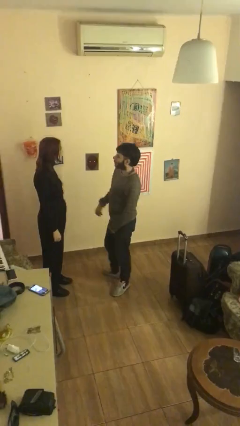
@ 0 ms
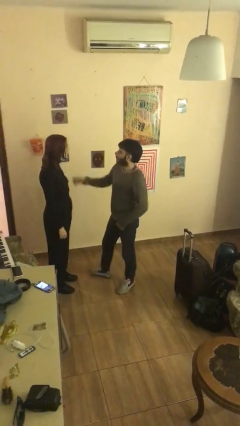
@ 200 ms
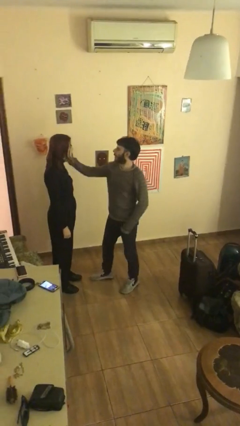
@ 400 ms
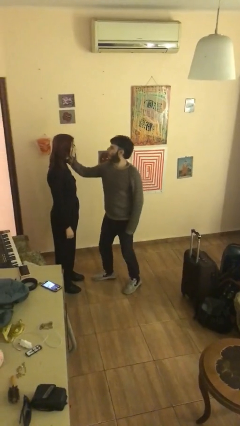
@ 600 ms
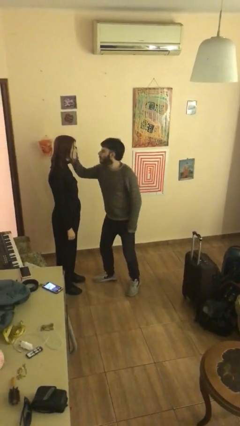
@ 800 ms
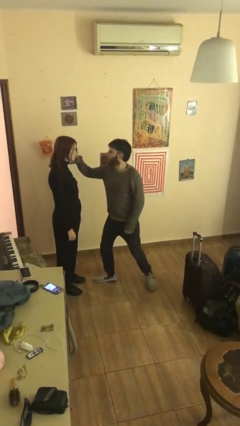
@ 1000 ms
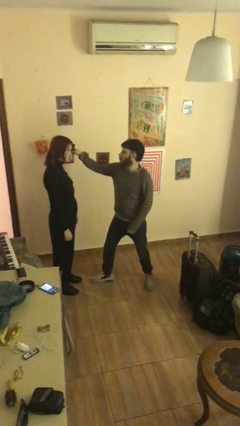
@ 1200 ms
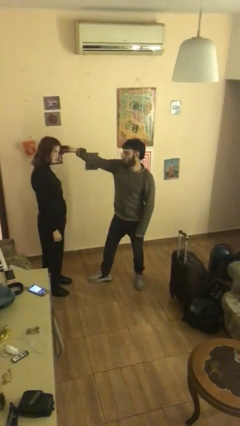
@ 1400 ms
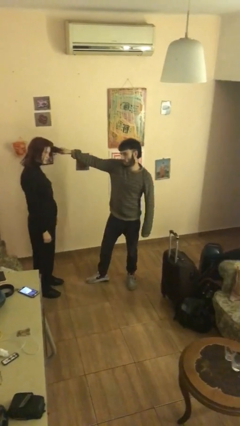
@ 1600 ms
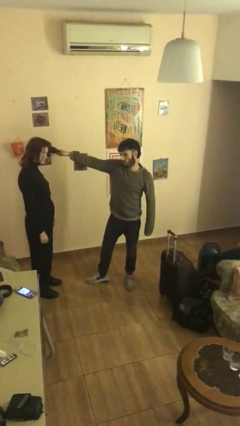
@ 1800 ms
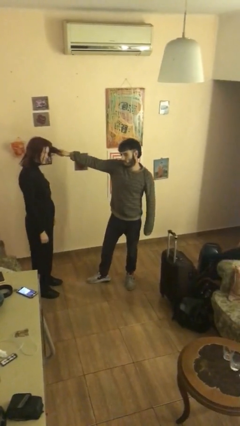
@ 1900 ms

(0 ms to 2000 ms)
person grabs person by hair

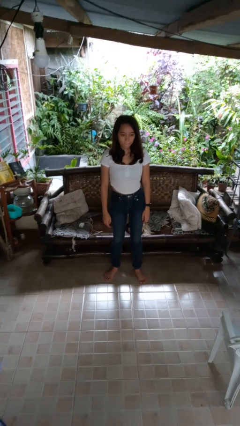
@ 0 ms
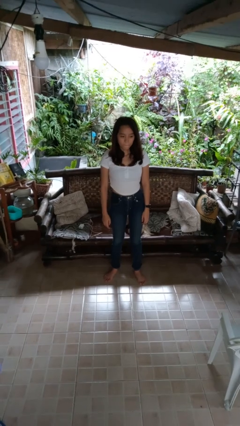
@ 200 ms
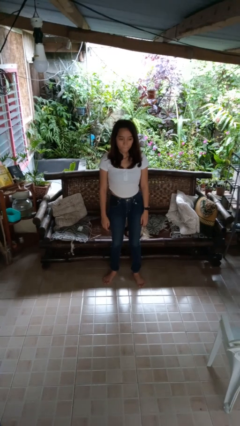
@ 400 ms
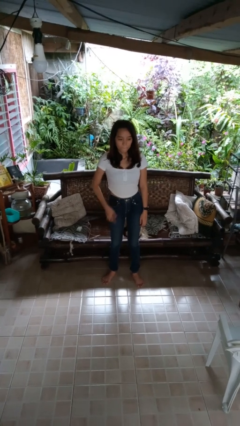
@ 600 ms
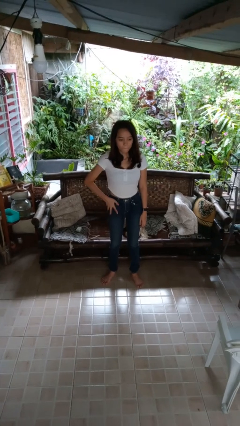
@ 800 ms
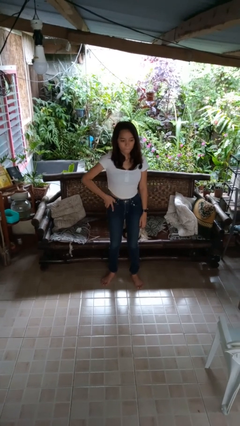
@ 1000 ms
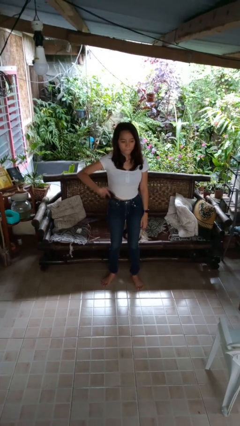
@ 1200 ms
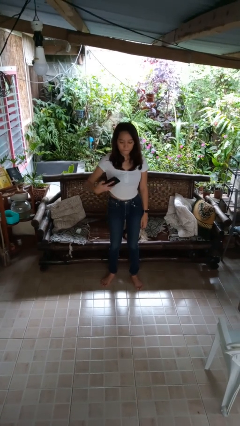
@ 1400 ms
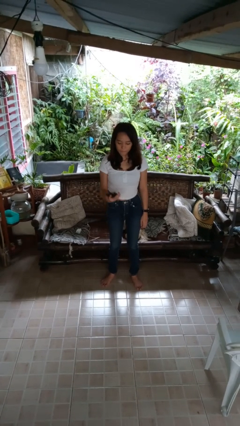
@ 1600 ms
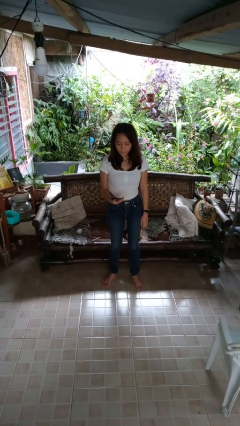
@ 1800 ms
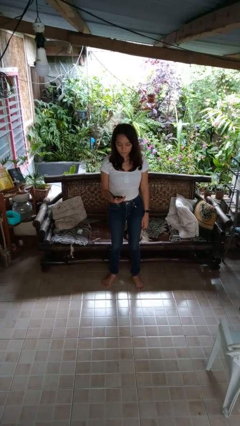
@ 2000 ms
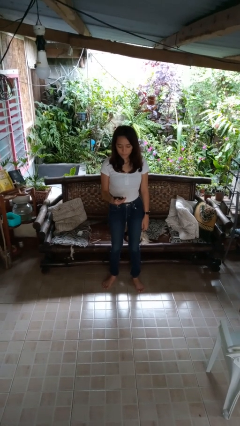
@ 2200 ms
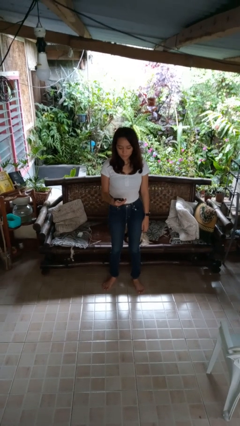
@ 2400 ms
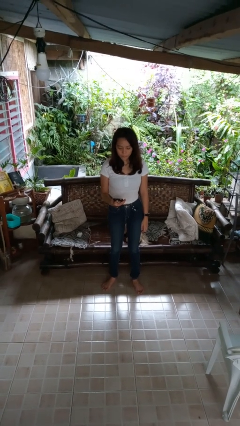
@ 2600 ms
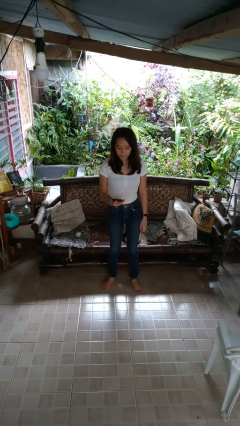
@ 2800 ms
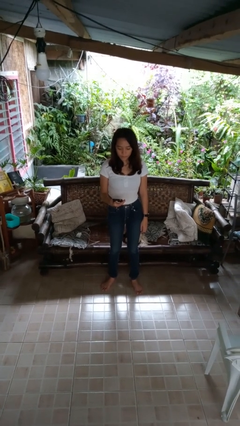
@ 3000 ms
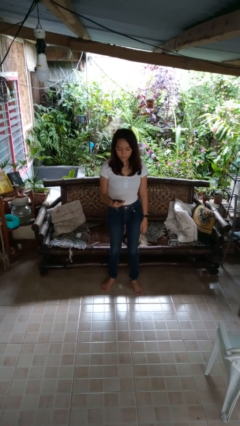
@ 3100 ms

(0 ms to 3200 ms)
person takes phone from pocket

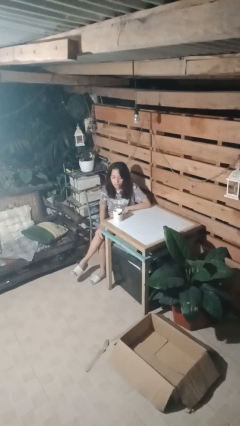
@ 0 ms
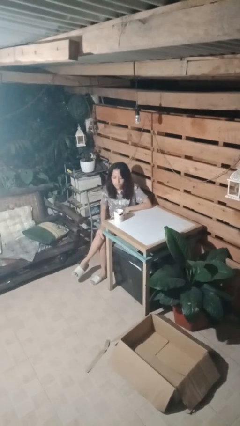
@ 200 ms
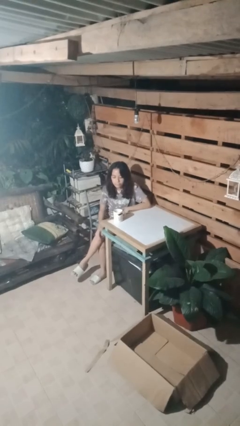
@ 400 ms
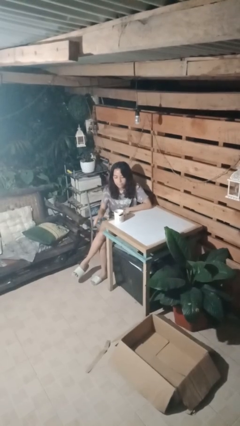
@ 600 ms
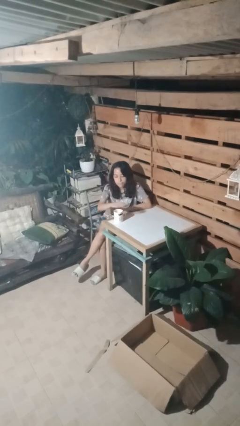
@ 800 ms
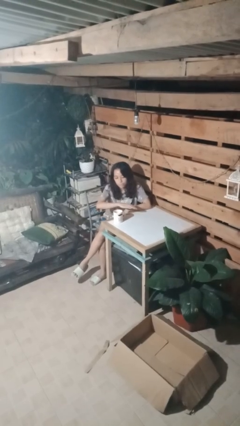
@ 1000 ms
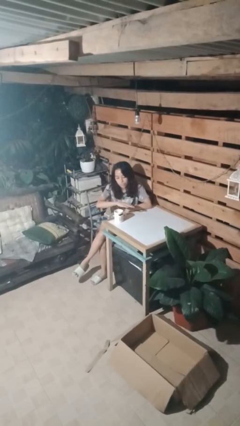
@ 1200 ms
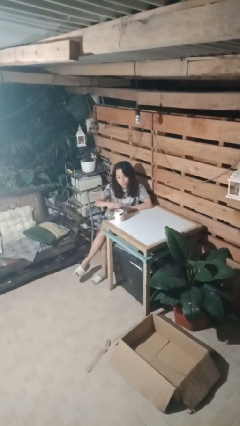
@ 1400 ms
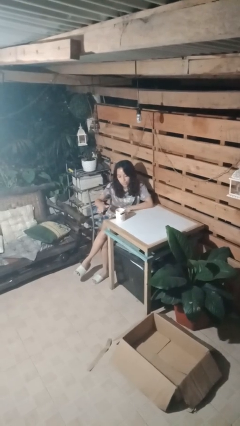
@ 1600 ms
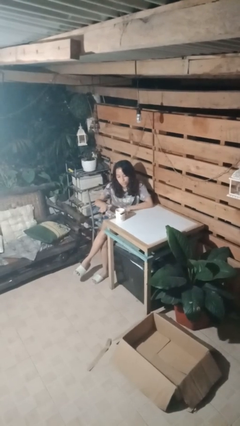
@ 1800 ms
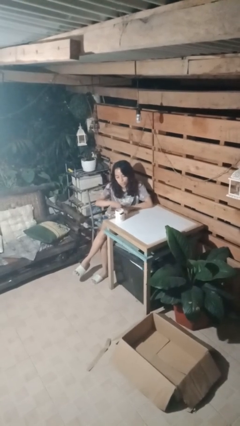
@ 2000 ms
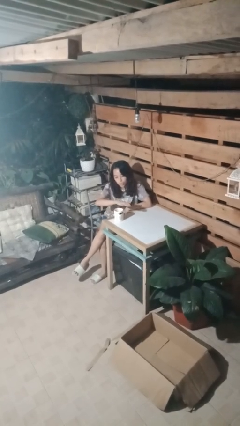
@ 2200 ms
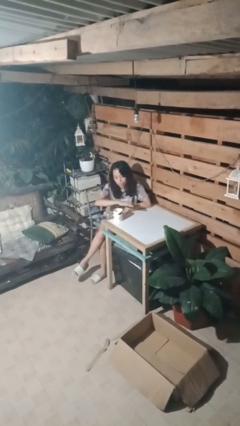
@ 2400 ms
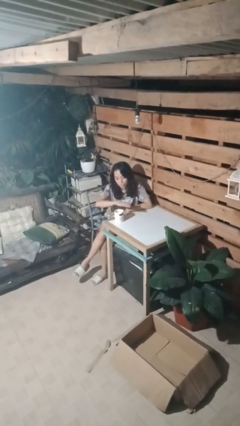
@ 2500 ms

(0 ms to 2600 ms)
person waves hand over object

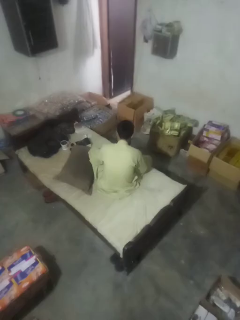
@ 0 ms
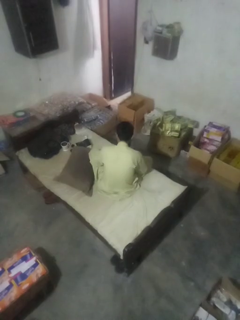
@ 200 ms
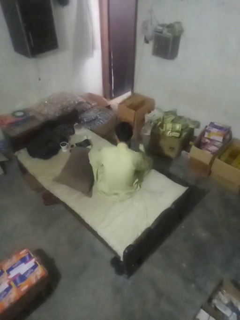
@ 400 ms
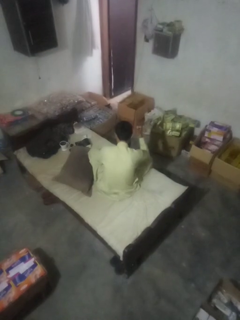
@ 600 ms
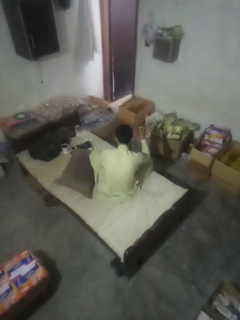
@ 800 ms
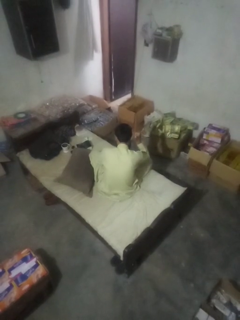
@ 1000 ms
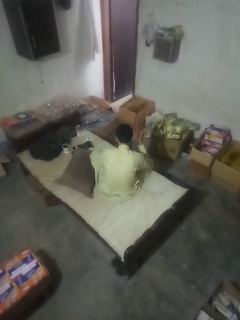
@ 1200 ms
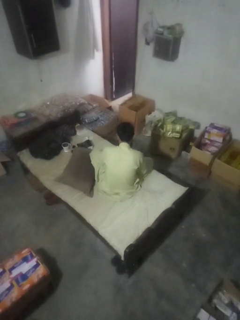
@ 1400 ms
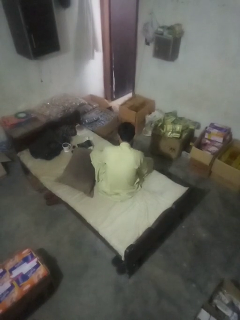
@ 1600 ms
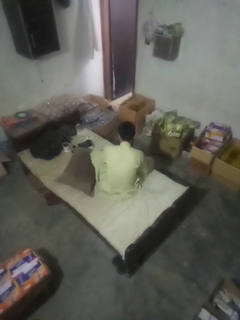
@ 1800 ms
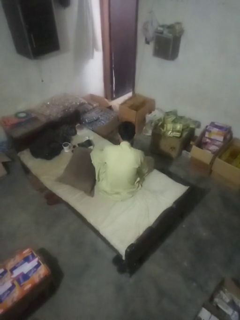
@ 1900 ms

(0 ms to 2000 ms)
person gestures behind me

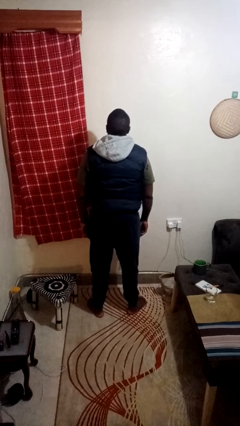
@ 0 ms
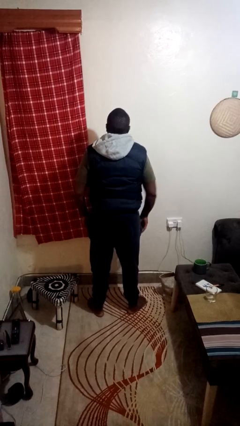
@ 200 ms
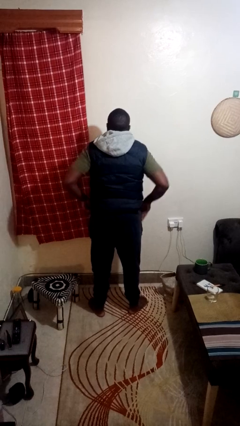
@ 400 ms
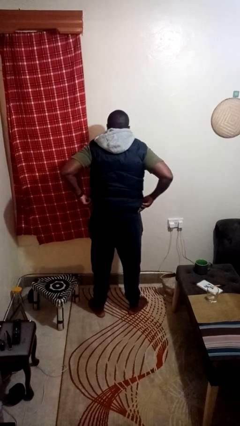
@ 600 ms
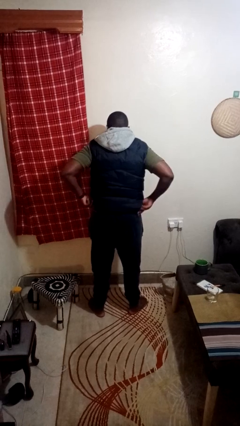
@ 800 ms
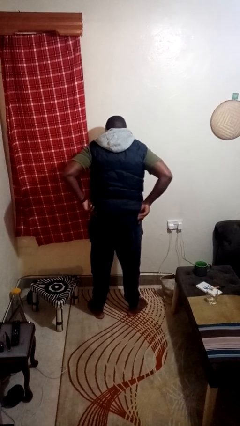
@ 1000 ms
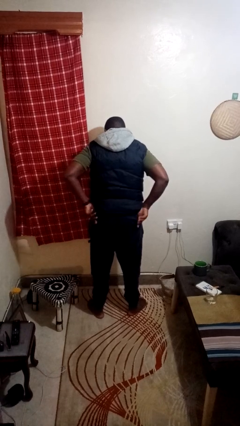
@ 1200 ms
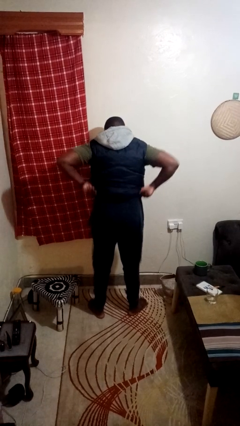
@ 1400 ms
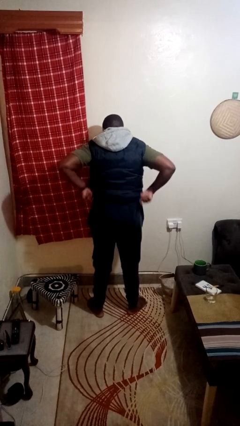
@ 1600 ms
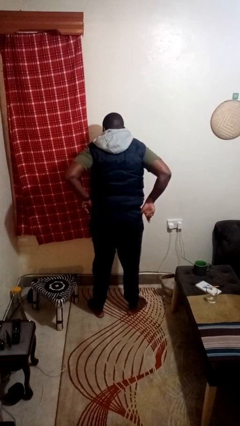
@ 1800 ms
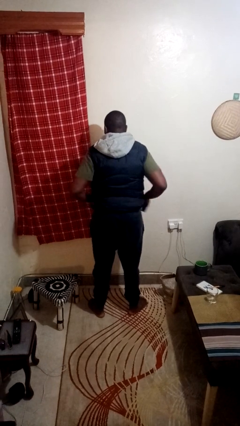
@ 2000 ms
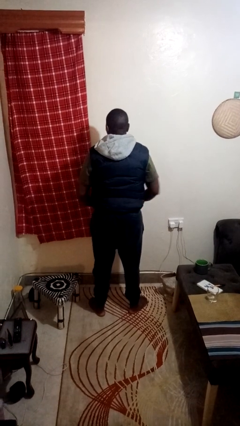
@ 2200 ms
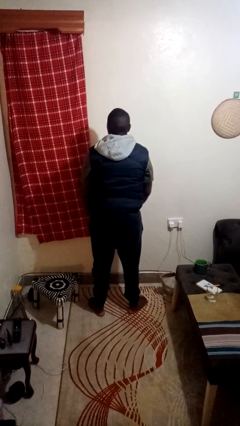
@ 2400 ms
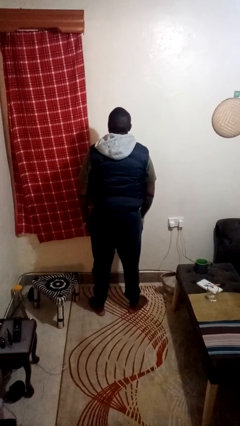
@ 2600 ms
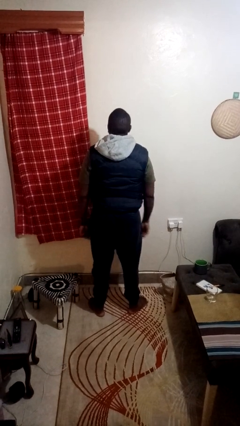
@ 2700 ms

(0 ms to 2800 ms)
person hikes up pants

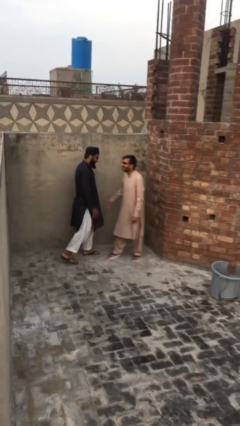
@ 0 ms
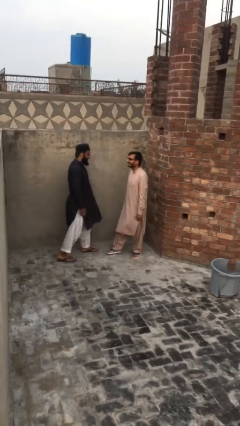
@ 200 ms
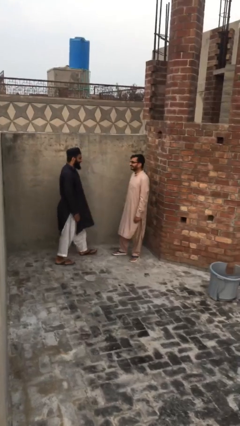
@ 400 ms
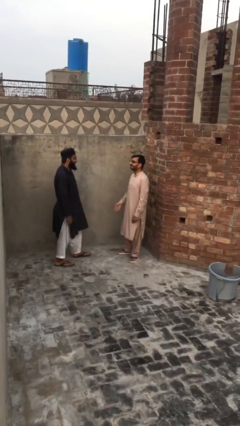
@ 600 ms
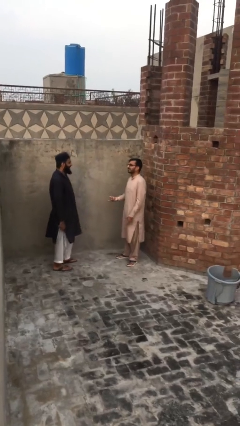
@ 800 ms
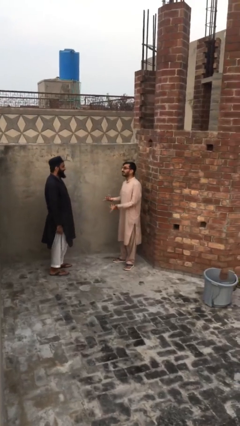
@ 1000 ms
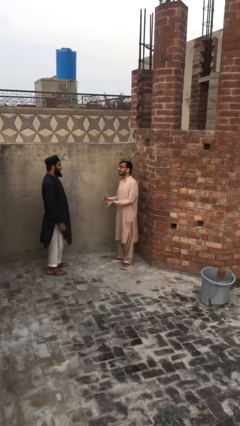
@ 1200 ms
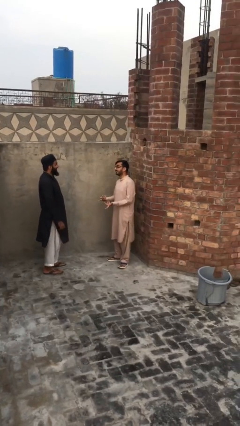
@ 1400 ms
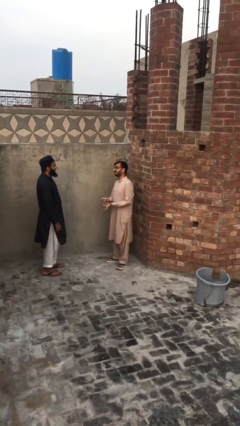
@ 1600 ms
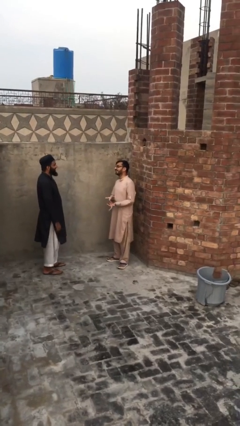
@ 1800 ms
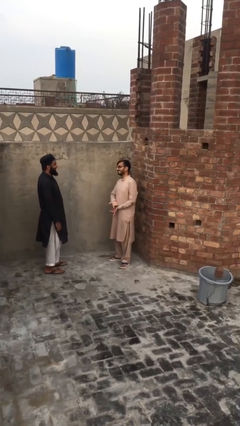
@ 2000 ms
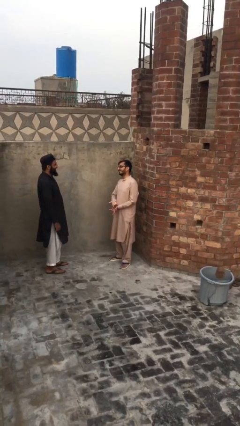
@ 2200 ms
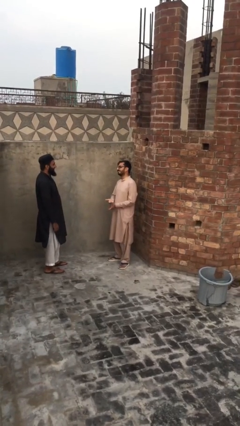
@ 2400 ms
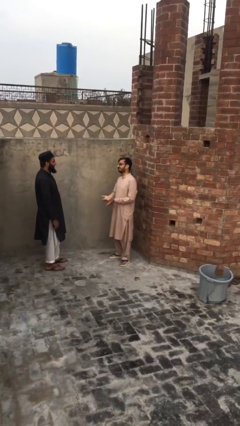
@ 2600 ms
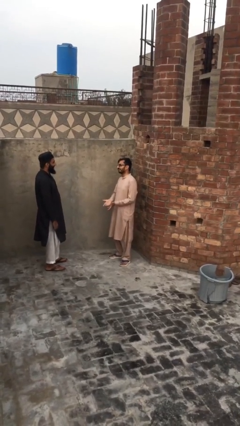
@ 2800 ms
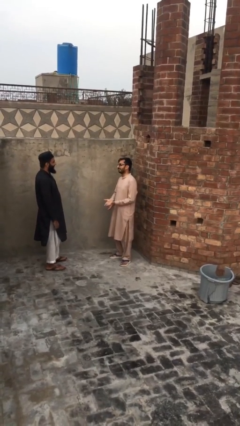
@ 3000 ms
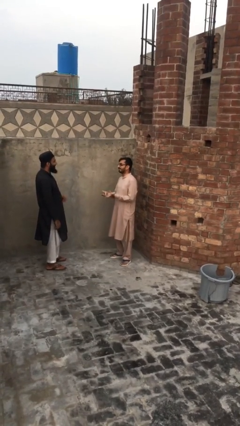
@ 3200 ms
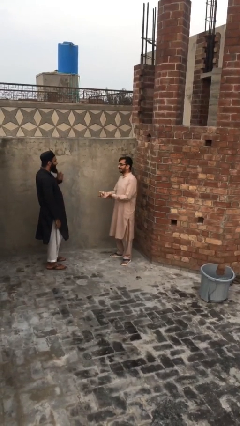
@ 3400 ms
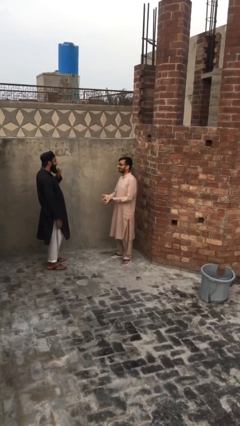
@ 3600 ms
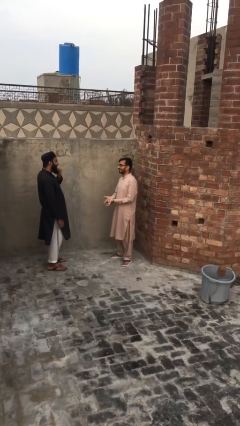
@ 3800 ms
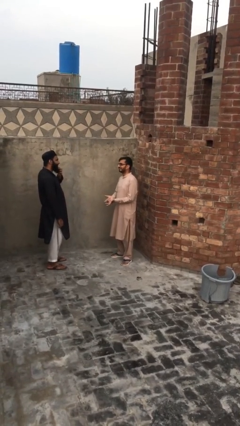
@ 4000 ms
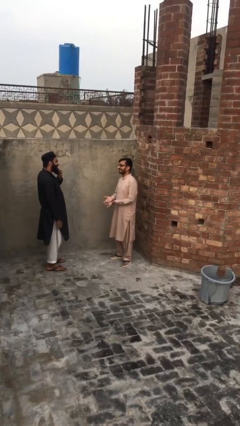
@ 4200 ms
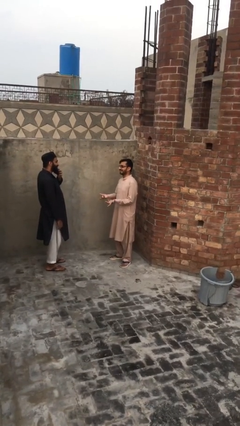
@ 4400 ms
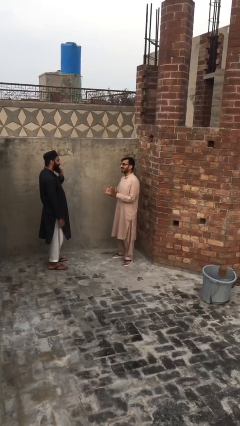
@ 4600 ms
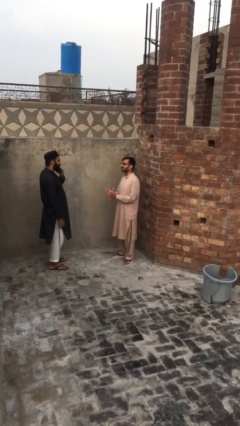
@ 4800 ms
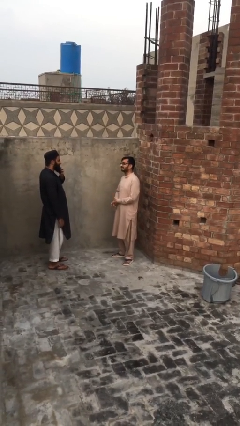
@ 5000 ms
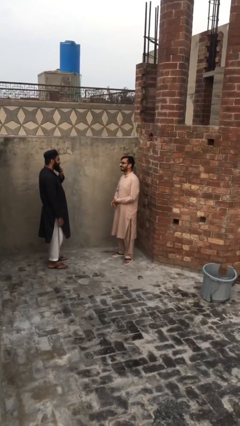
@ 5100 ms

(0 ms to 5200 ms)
person talks to person

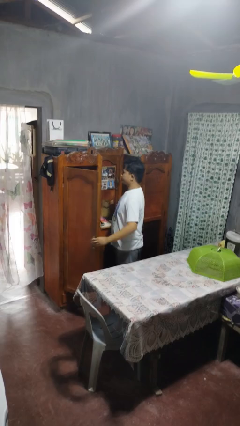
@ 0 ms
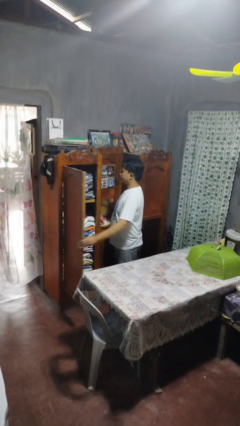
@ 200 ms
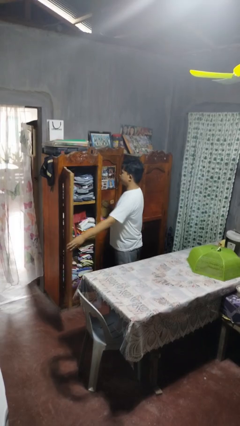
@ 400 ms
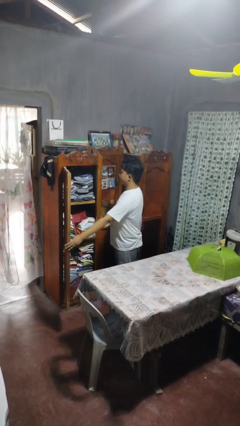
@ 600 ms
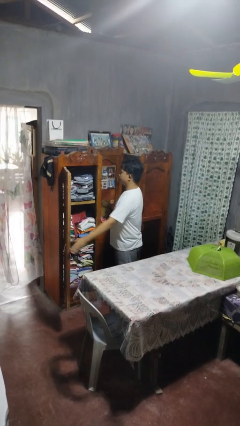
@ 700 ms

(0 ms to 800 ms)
person opens closet door
